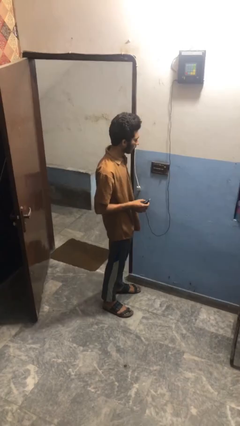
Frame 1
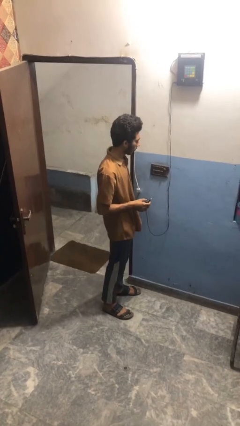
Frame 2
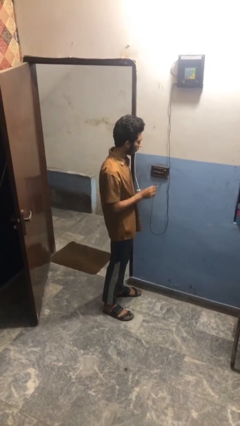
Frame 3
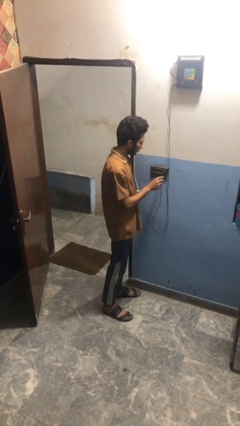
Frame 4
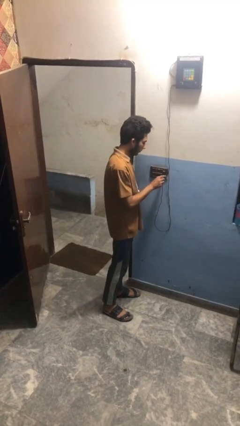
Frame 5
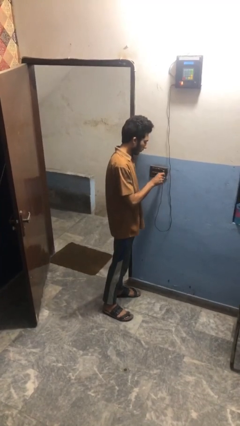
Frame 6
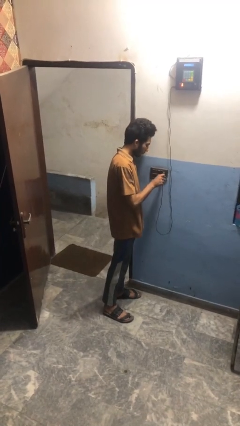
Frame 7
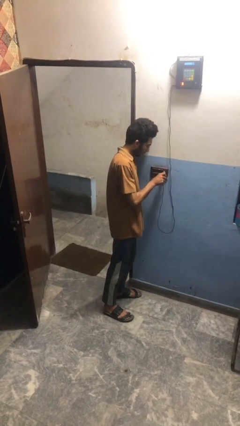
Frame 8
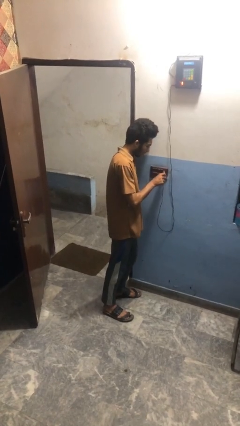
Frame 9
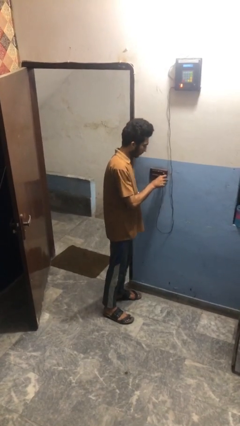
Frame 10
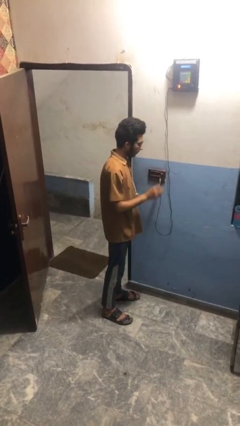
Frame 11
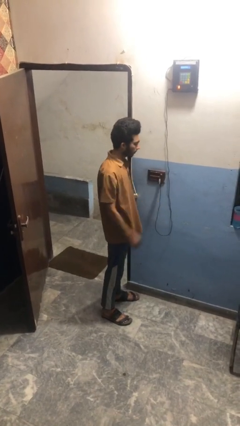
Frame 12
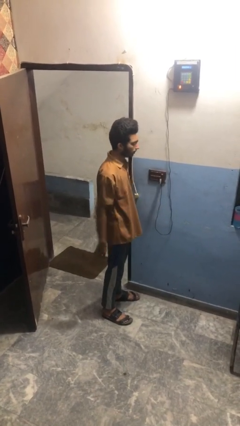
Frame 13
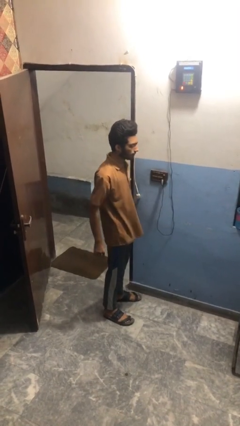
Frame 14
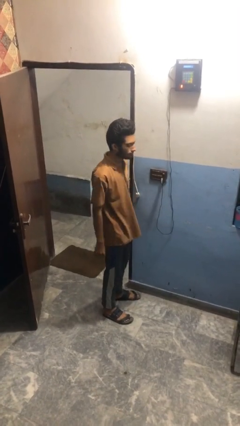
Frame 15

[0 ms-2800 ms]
person plugs into electrical socket

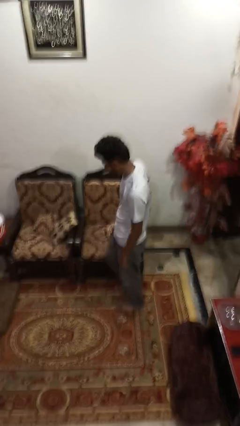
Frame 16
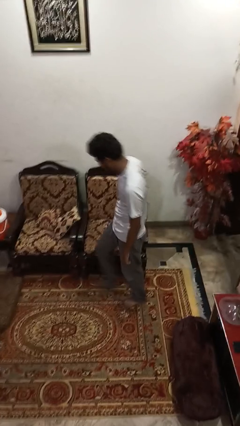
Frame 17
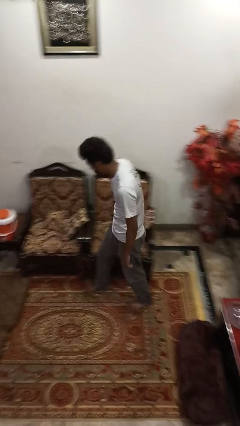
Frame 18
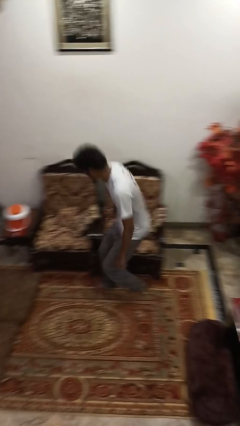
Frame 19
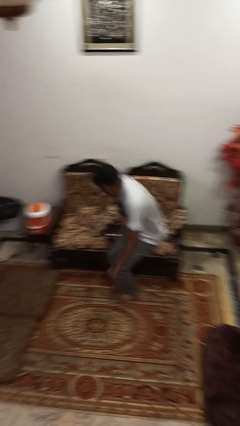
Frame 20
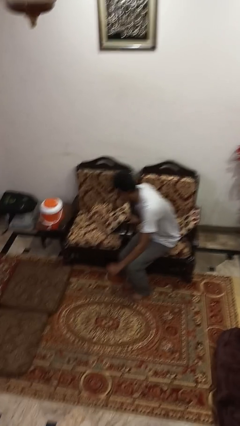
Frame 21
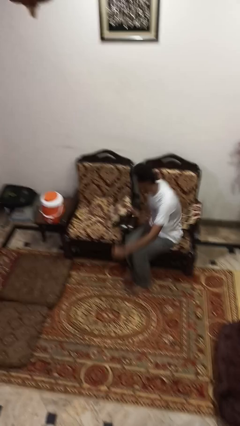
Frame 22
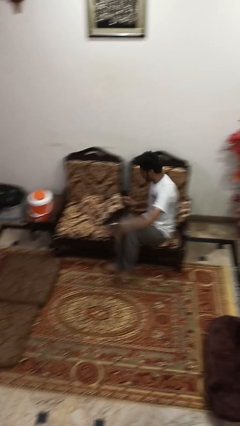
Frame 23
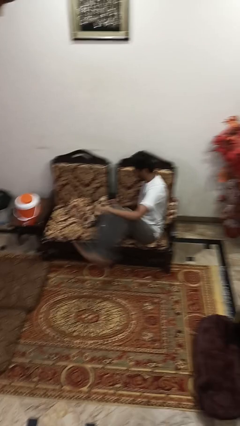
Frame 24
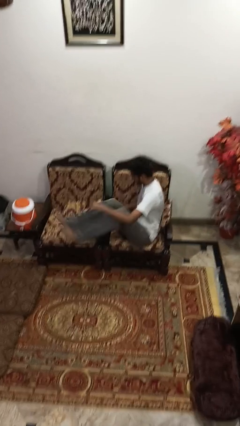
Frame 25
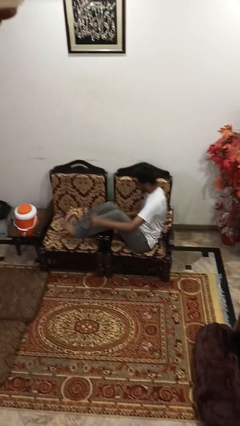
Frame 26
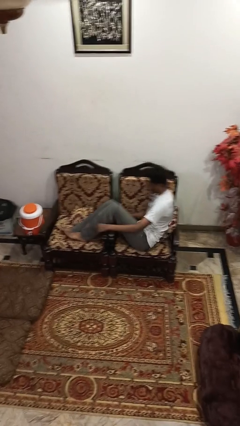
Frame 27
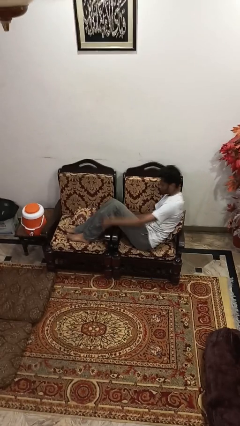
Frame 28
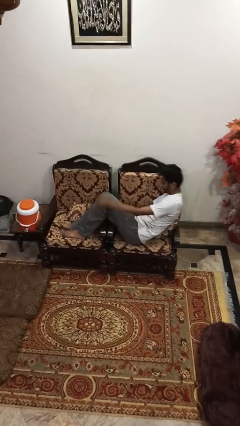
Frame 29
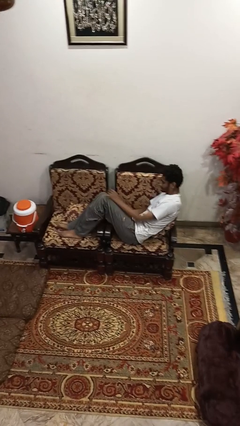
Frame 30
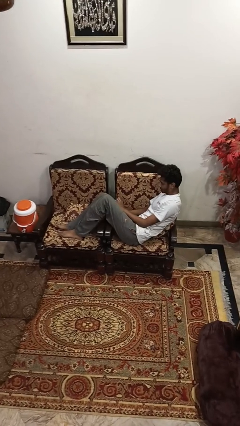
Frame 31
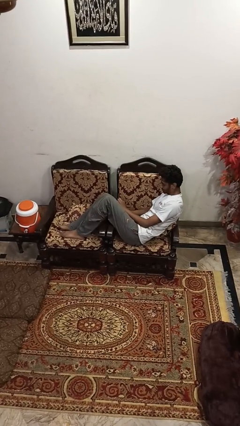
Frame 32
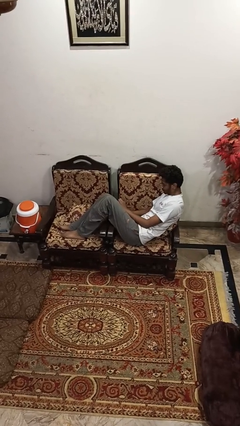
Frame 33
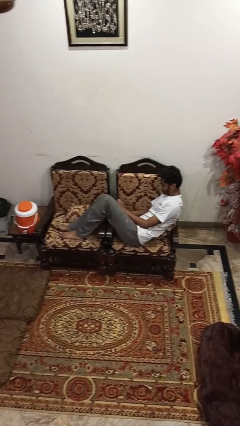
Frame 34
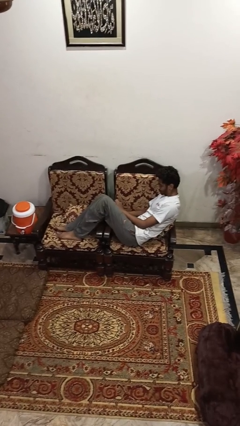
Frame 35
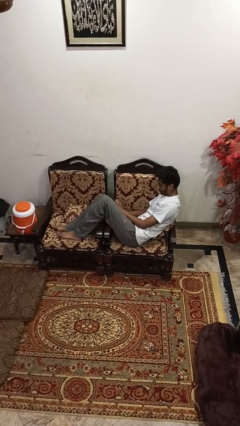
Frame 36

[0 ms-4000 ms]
person lies down on couch

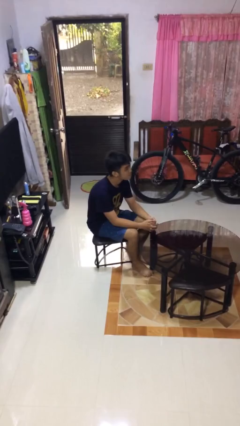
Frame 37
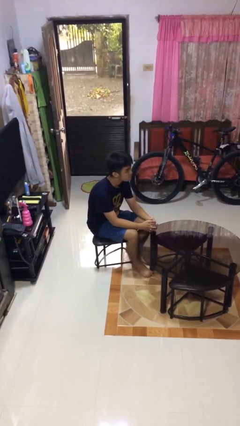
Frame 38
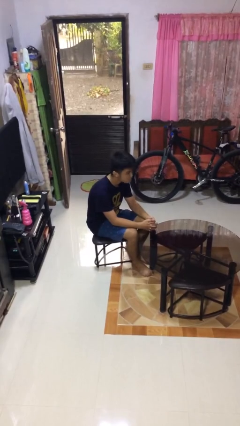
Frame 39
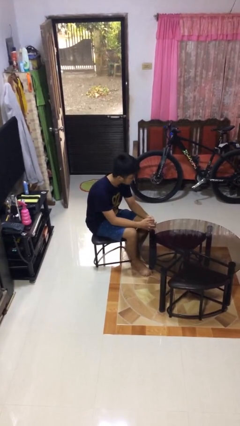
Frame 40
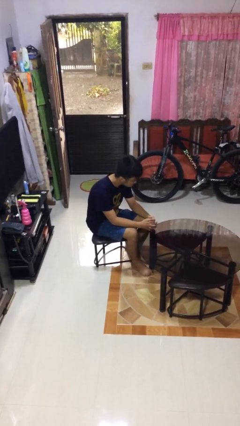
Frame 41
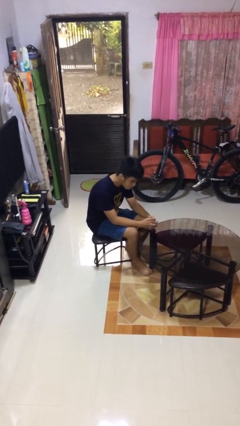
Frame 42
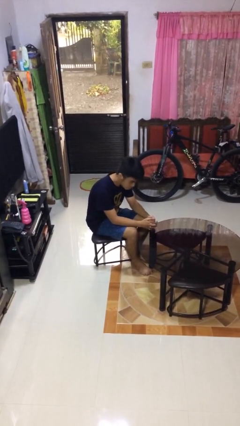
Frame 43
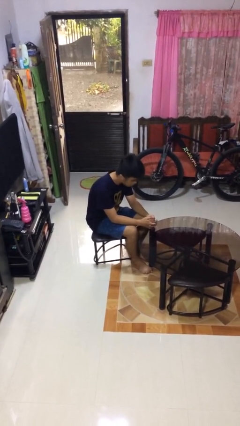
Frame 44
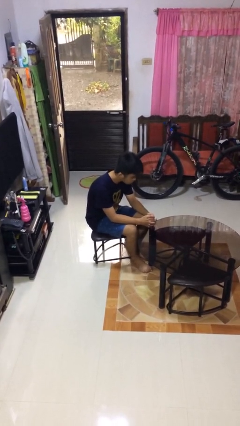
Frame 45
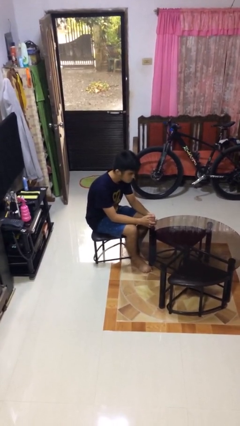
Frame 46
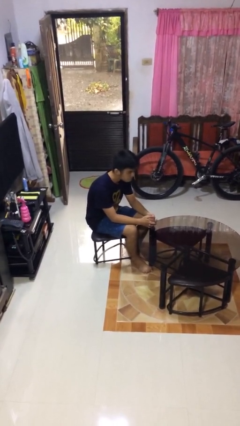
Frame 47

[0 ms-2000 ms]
person shakes head

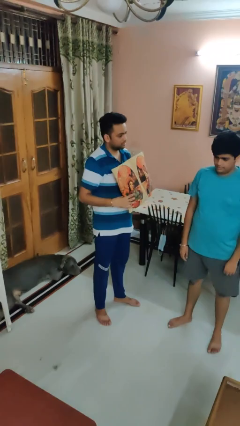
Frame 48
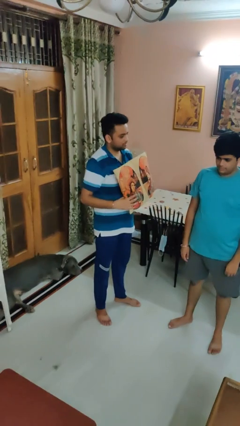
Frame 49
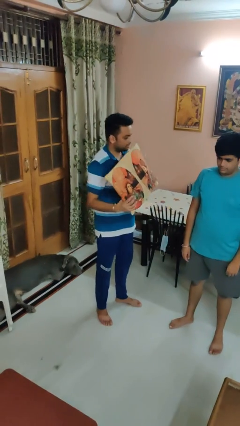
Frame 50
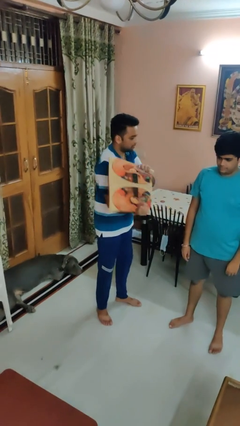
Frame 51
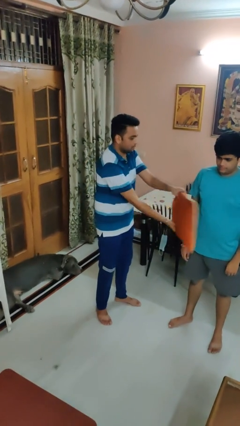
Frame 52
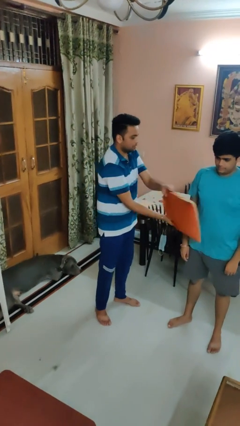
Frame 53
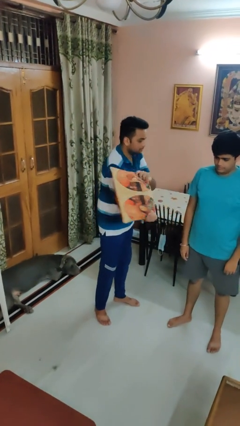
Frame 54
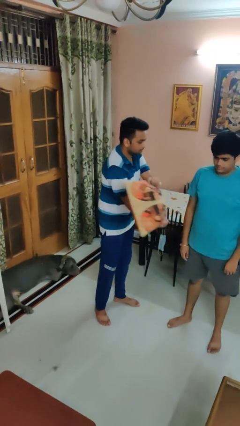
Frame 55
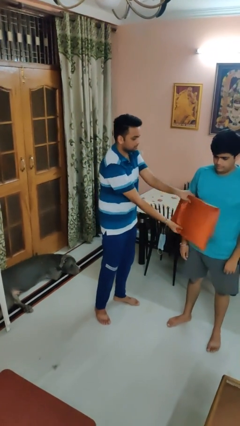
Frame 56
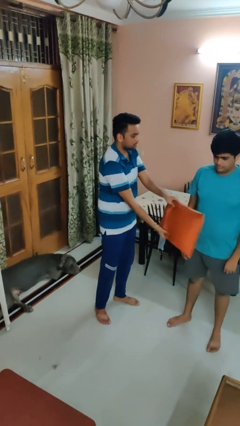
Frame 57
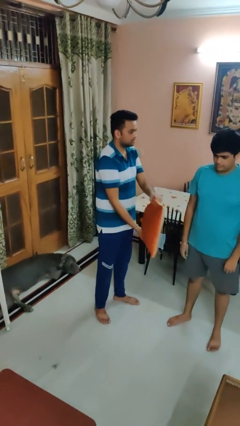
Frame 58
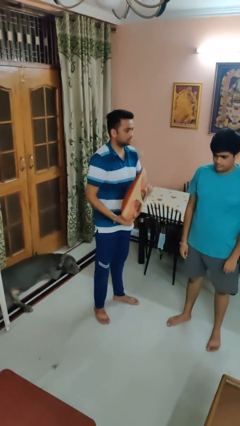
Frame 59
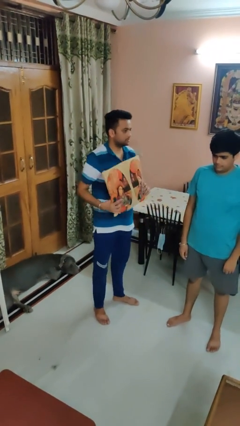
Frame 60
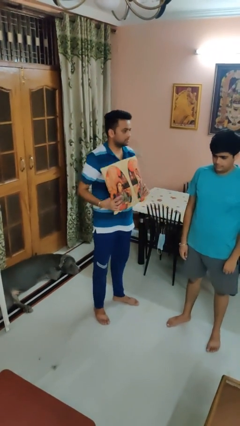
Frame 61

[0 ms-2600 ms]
person hits person with pillow

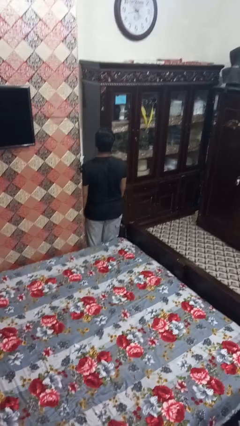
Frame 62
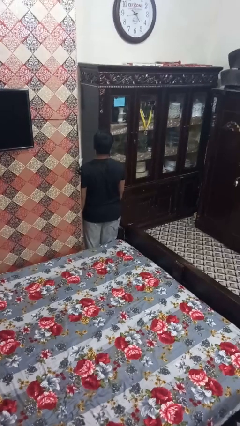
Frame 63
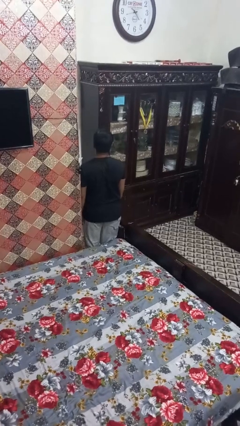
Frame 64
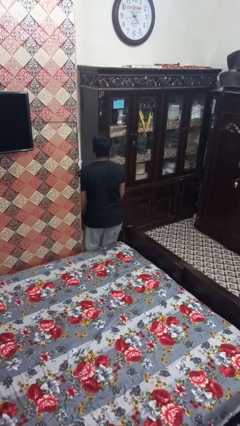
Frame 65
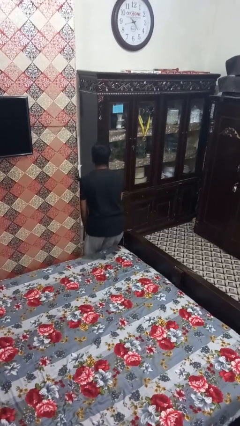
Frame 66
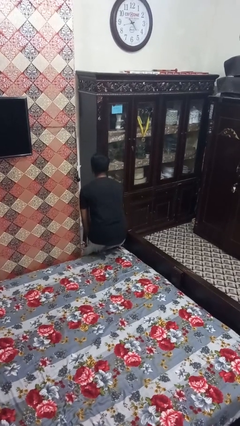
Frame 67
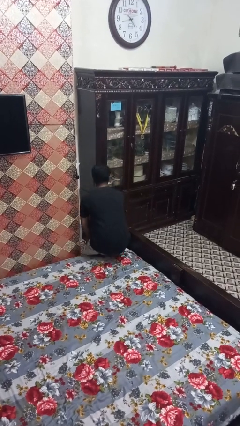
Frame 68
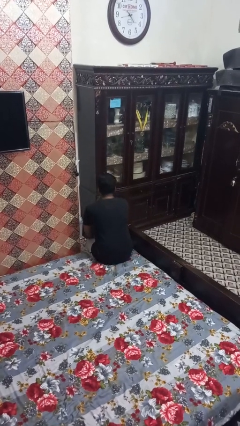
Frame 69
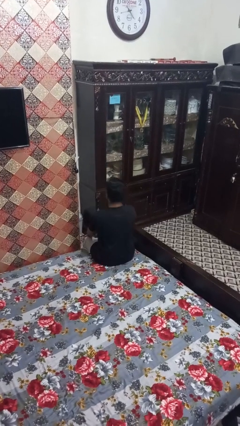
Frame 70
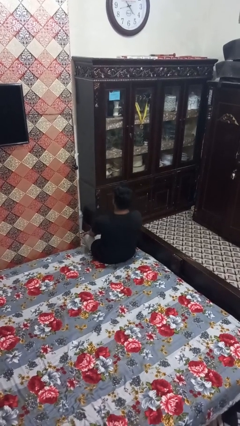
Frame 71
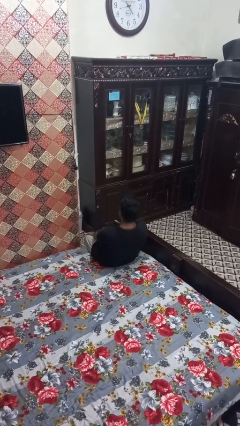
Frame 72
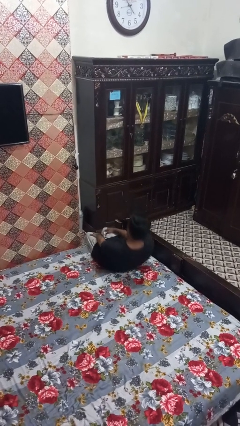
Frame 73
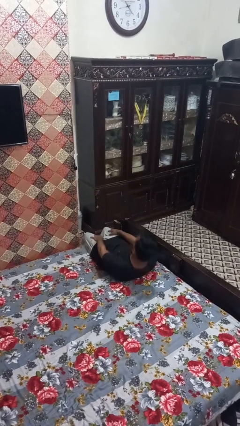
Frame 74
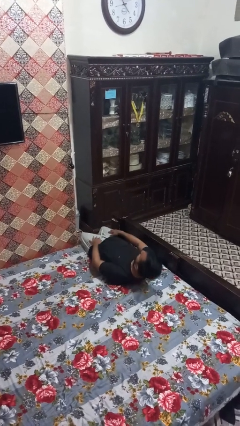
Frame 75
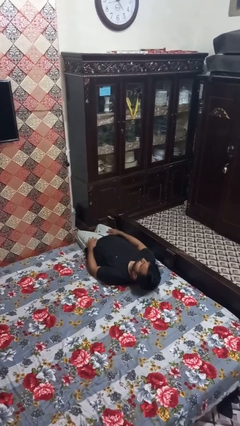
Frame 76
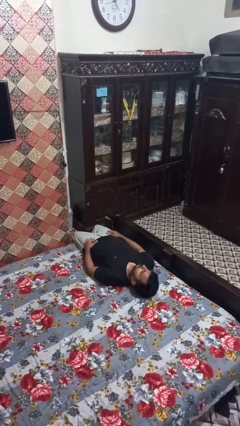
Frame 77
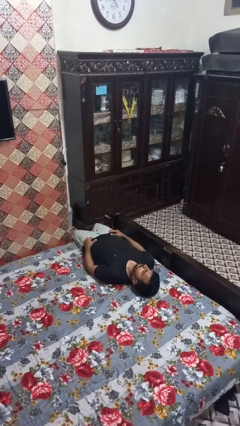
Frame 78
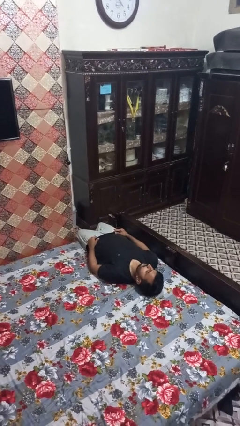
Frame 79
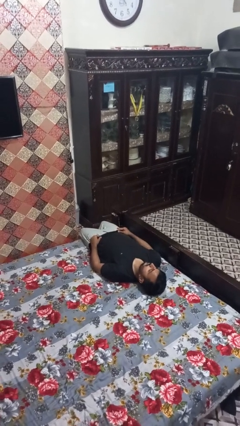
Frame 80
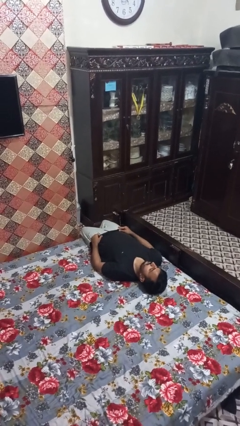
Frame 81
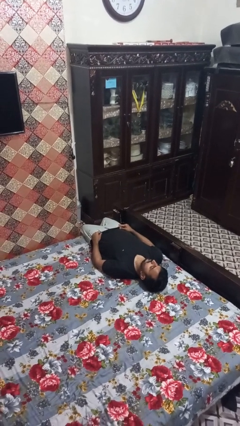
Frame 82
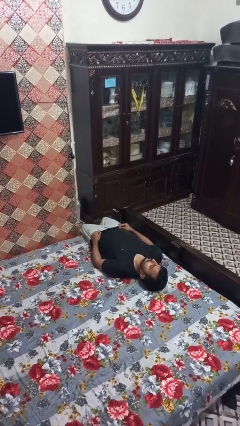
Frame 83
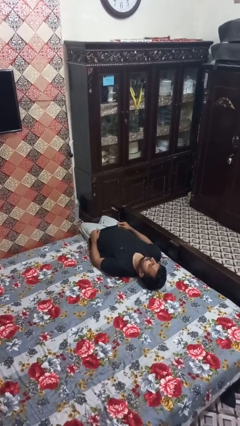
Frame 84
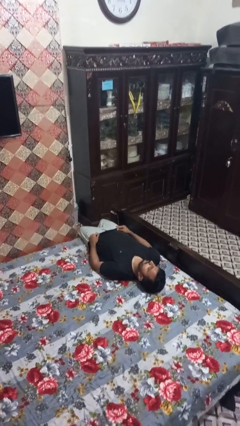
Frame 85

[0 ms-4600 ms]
person lies down on bed

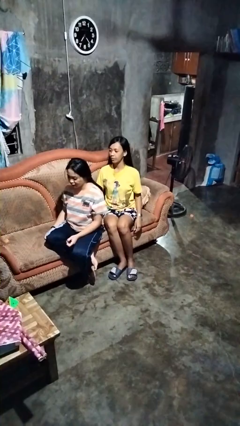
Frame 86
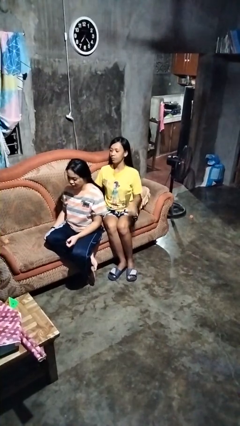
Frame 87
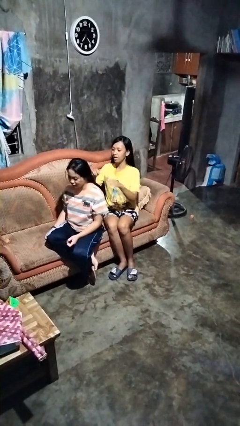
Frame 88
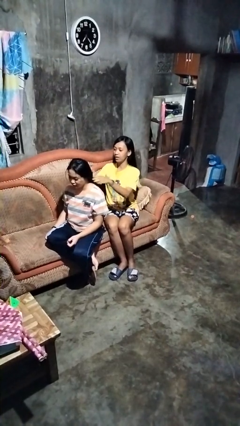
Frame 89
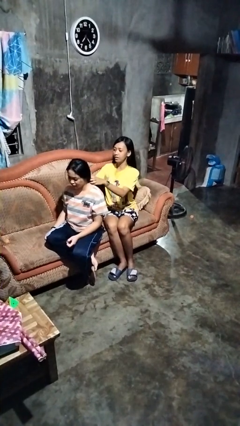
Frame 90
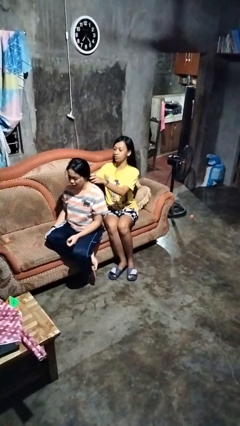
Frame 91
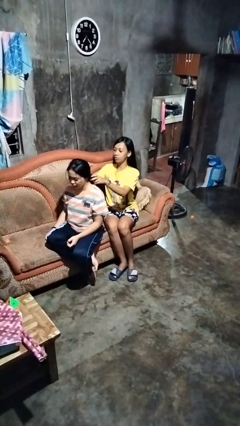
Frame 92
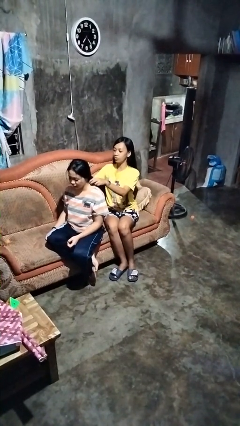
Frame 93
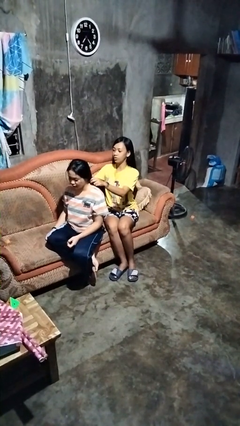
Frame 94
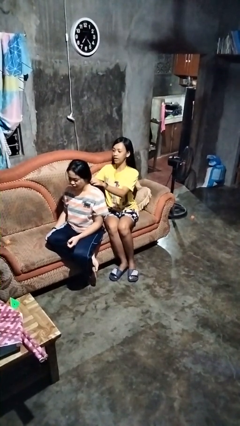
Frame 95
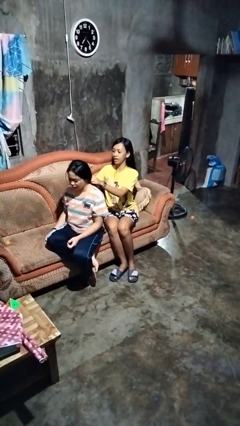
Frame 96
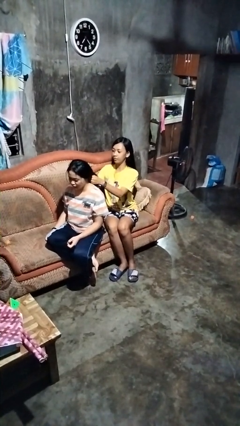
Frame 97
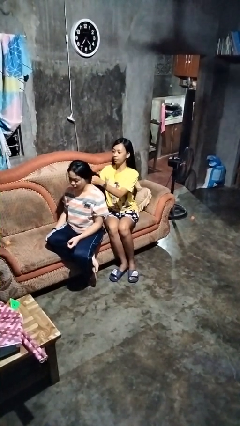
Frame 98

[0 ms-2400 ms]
person braids hair of person
